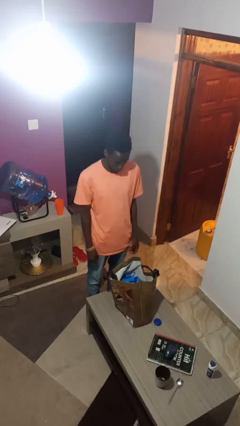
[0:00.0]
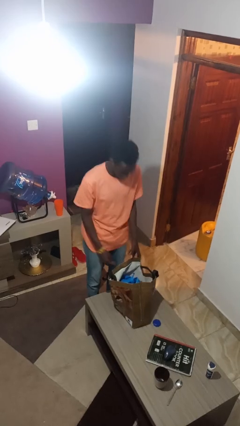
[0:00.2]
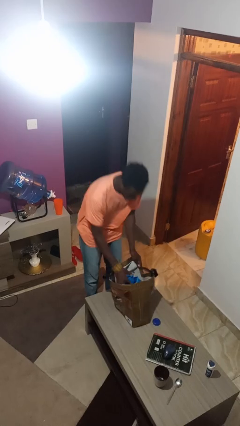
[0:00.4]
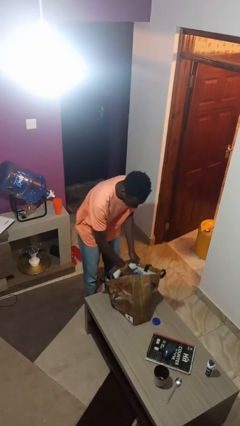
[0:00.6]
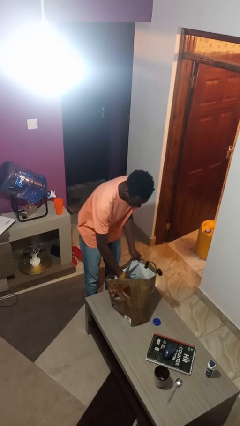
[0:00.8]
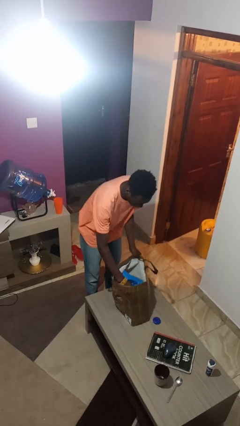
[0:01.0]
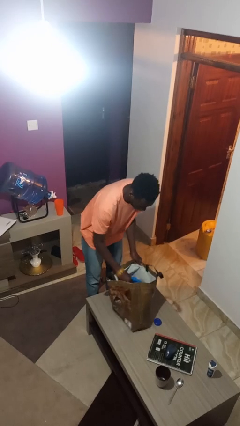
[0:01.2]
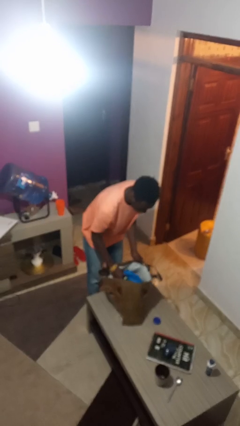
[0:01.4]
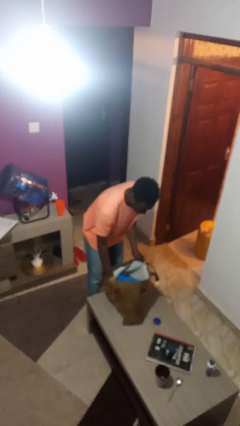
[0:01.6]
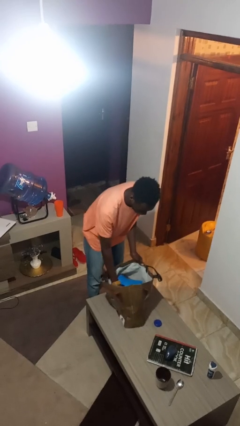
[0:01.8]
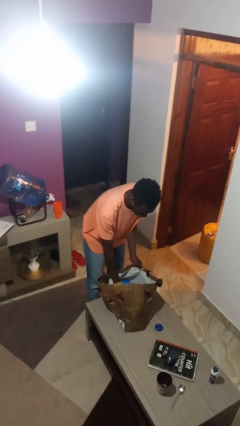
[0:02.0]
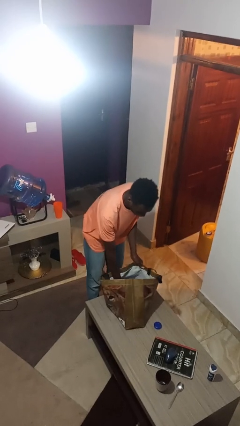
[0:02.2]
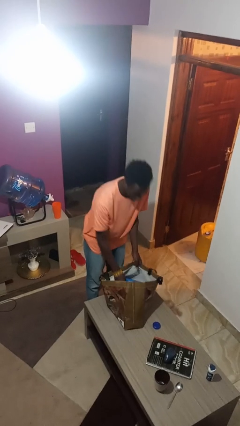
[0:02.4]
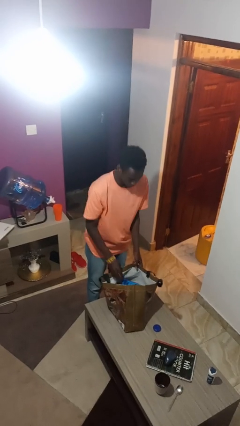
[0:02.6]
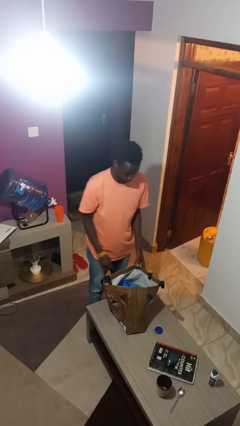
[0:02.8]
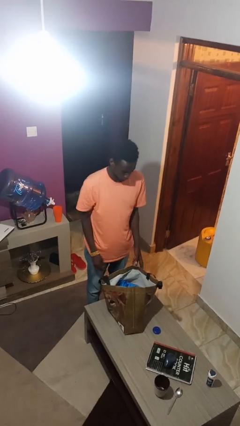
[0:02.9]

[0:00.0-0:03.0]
person searches in bag

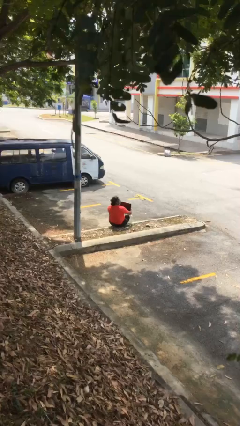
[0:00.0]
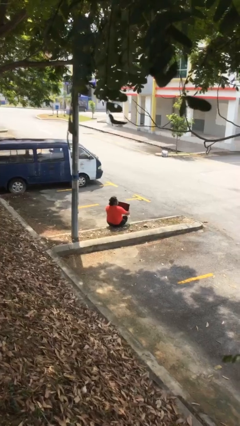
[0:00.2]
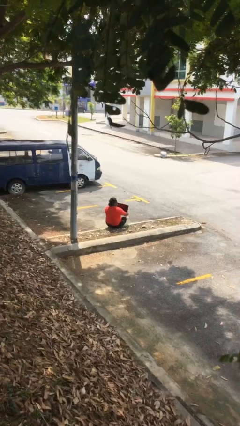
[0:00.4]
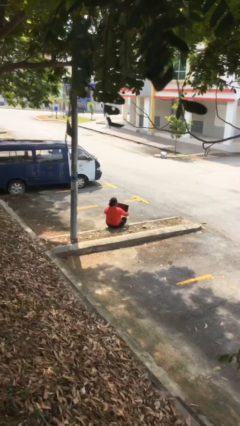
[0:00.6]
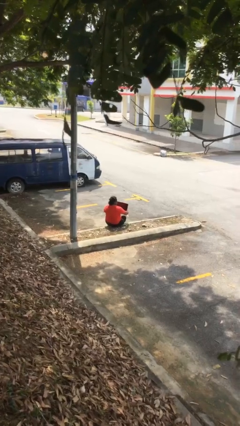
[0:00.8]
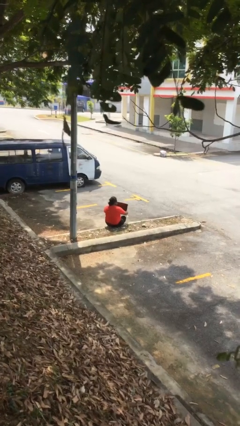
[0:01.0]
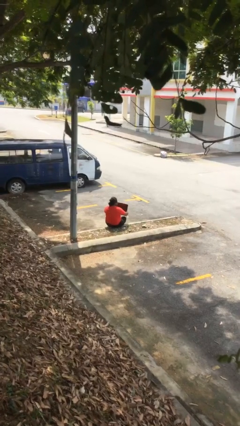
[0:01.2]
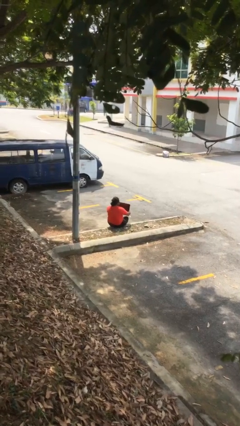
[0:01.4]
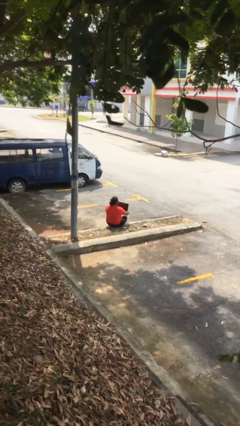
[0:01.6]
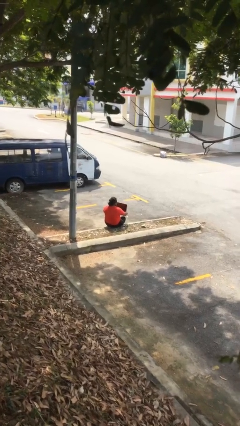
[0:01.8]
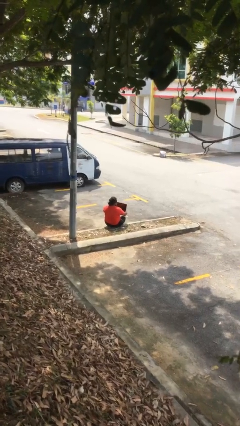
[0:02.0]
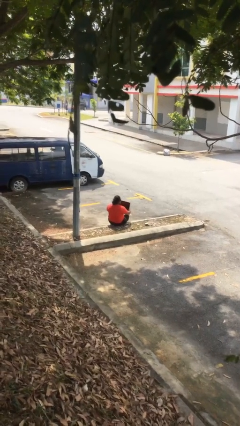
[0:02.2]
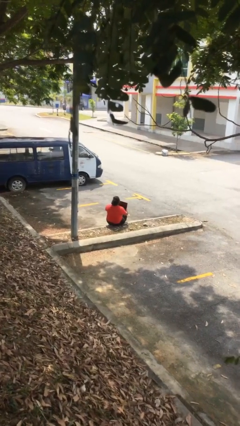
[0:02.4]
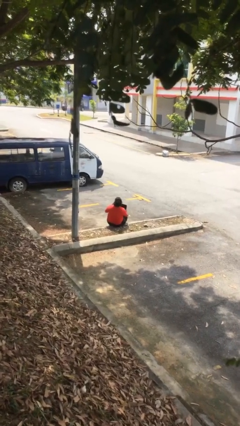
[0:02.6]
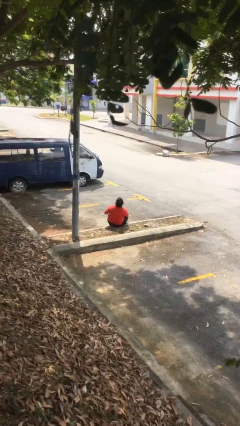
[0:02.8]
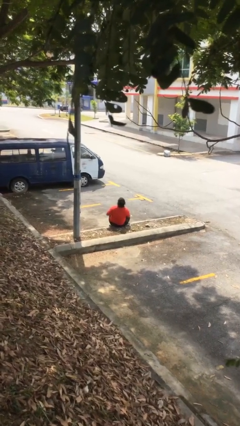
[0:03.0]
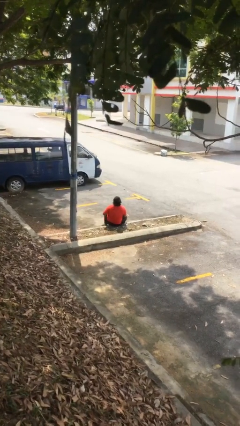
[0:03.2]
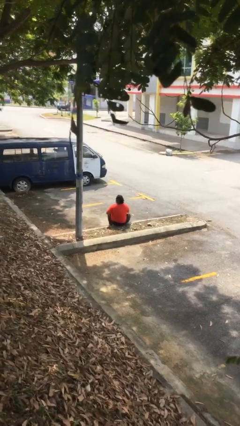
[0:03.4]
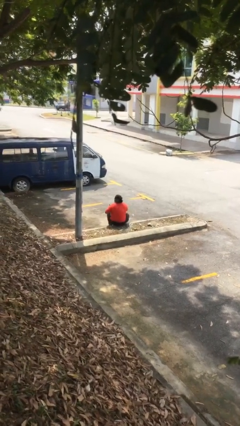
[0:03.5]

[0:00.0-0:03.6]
person interacts with laptop

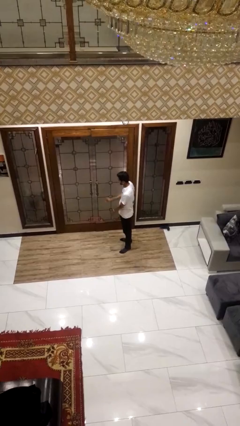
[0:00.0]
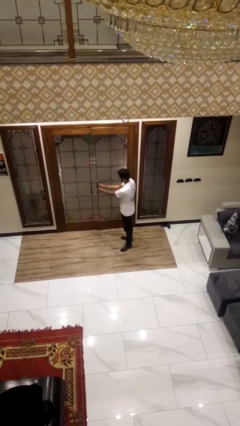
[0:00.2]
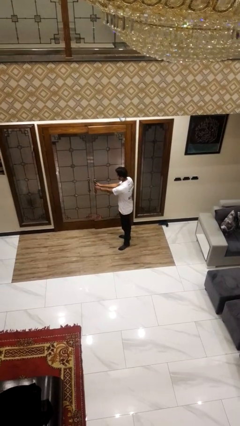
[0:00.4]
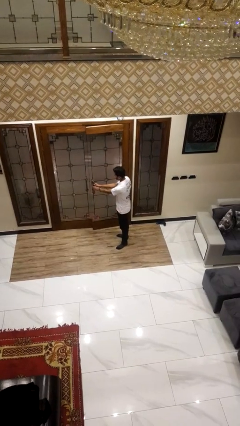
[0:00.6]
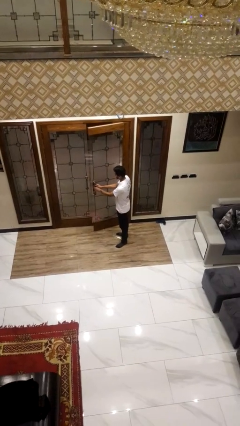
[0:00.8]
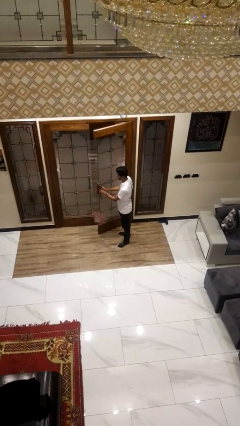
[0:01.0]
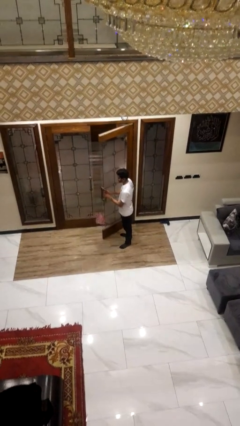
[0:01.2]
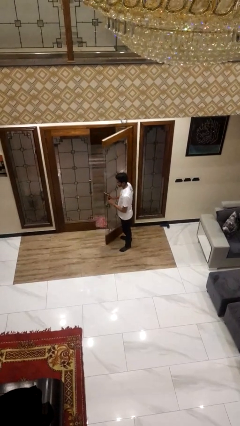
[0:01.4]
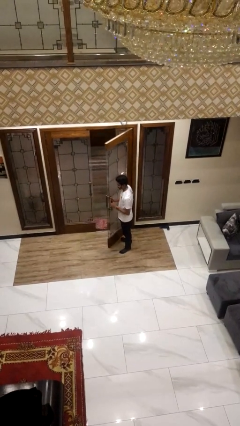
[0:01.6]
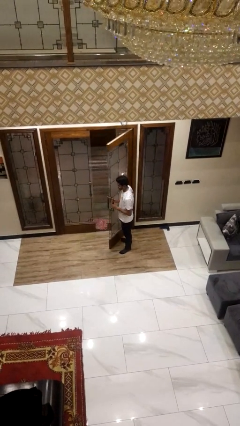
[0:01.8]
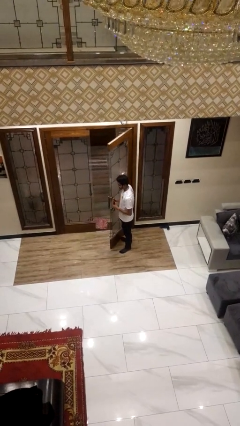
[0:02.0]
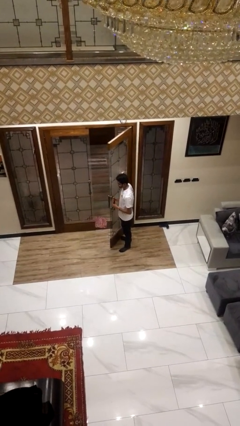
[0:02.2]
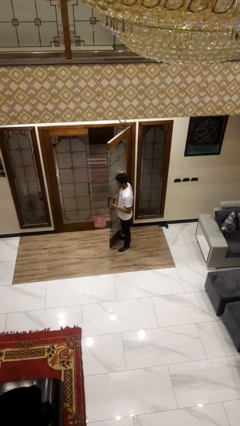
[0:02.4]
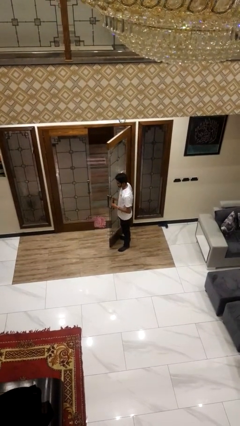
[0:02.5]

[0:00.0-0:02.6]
person opens facility door

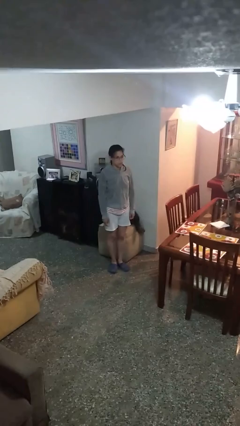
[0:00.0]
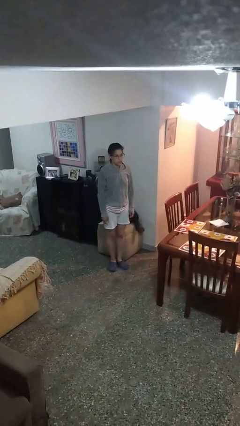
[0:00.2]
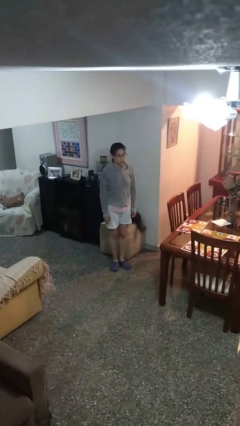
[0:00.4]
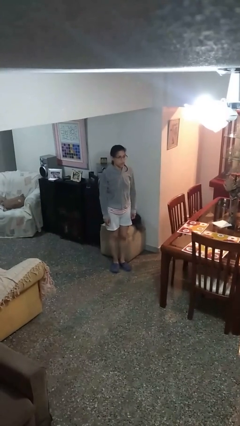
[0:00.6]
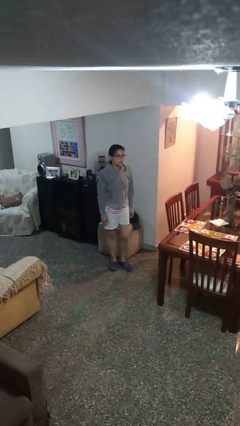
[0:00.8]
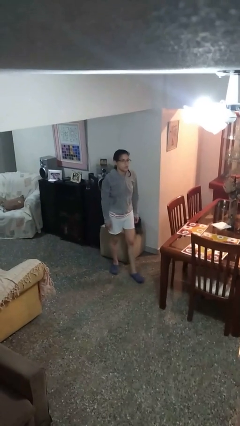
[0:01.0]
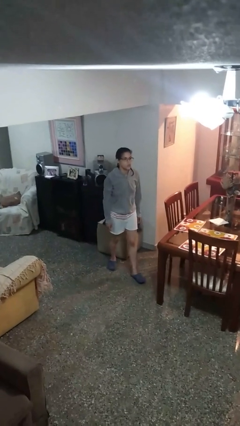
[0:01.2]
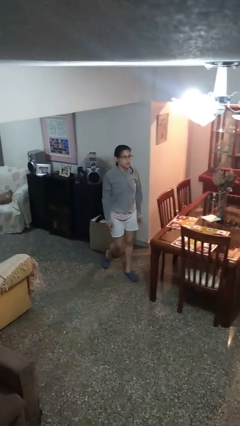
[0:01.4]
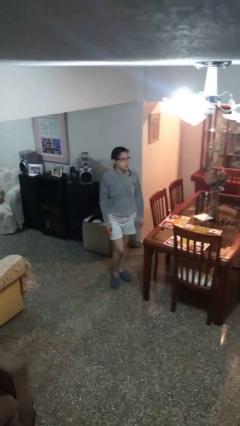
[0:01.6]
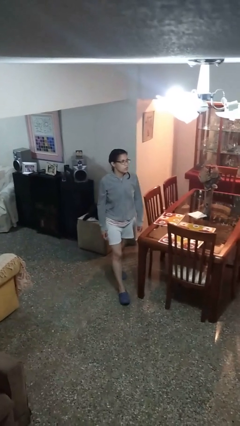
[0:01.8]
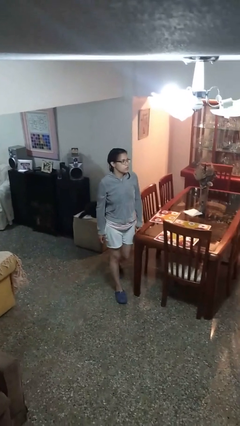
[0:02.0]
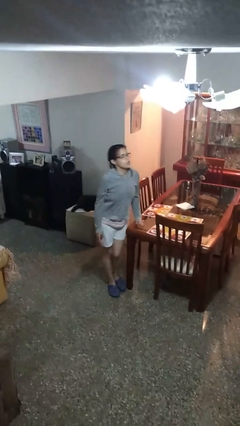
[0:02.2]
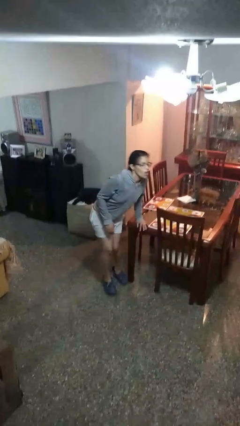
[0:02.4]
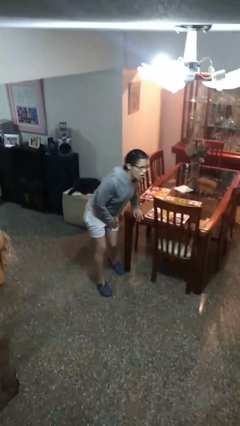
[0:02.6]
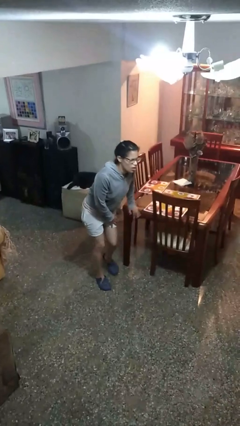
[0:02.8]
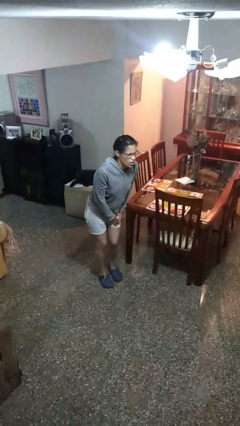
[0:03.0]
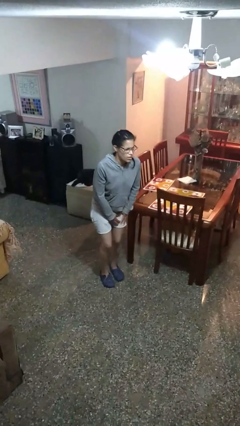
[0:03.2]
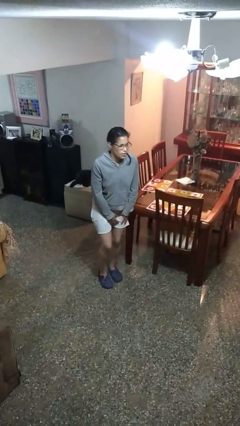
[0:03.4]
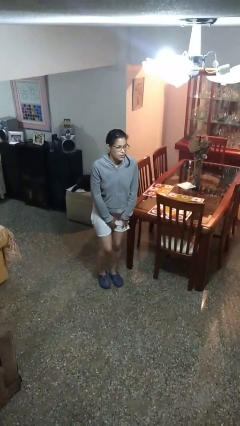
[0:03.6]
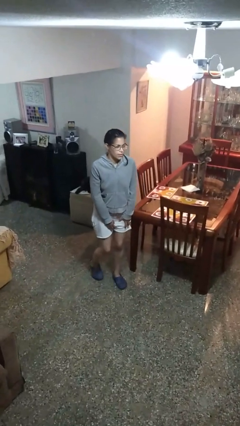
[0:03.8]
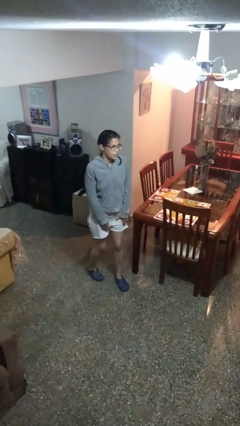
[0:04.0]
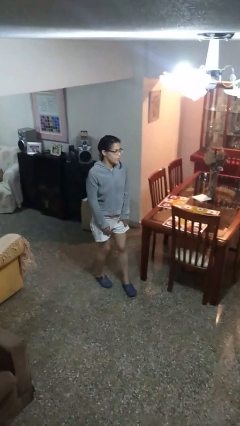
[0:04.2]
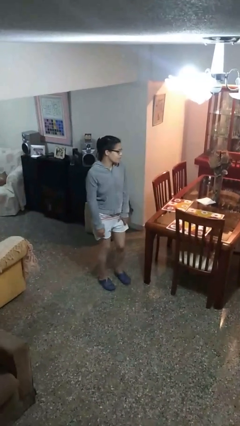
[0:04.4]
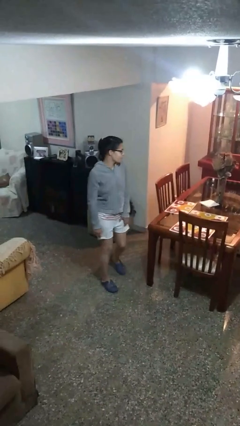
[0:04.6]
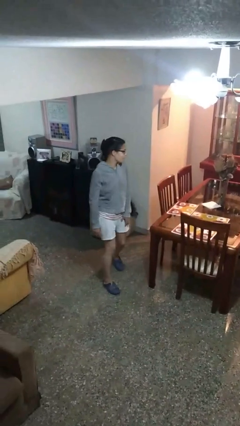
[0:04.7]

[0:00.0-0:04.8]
person bumps into table

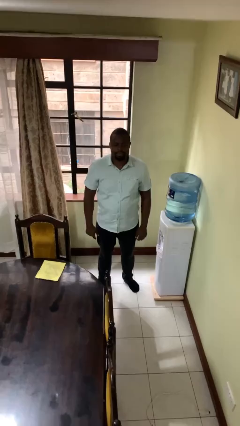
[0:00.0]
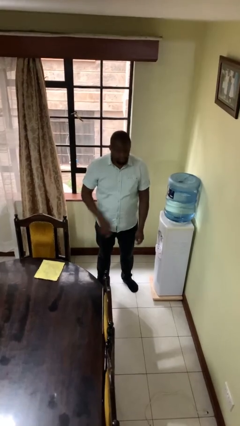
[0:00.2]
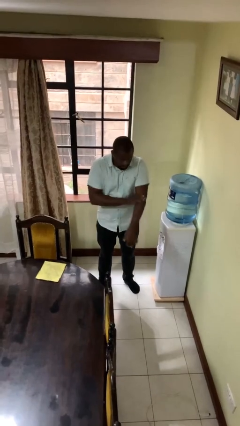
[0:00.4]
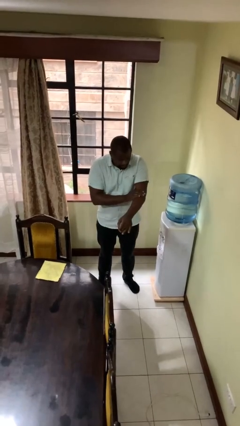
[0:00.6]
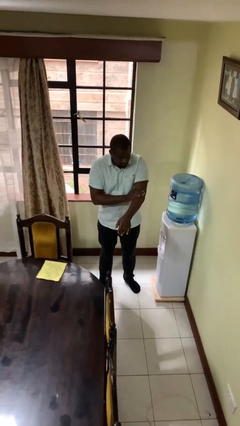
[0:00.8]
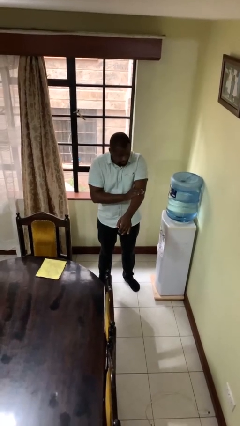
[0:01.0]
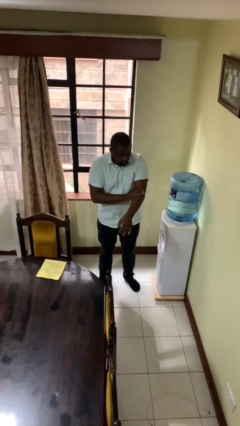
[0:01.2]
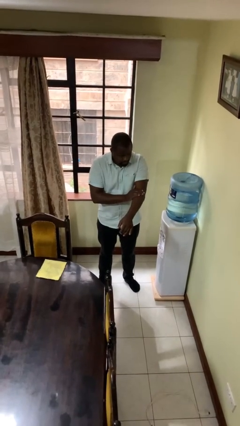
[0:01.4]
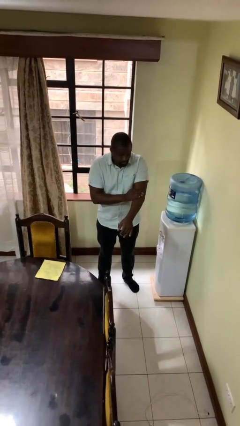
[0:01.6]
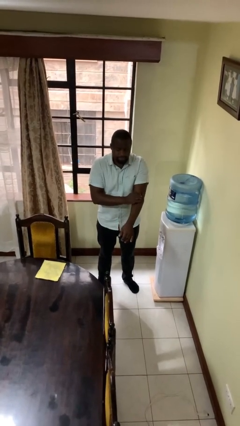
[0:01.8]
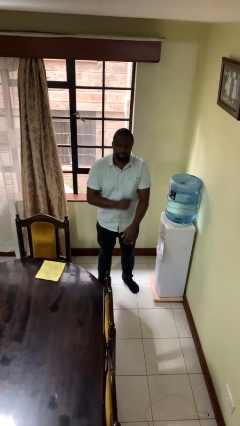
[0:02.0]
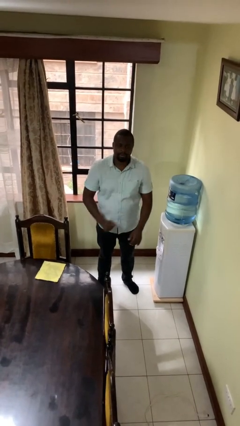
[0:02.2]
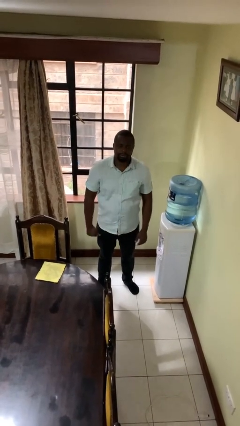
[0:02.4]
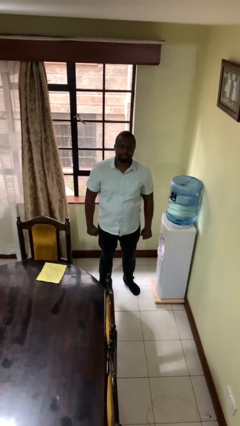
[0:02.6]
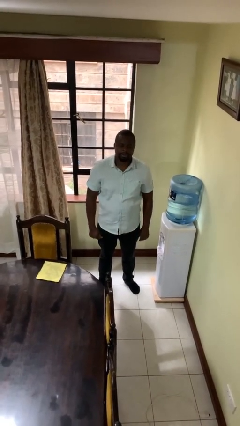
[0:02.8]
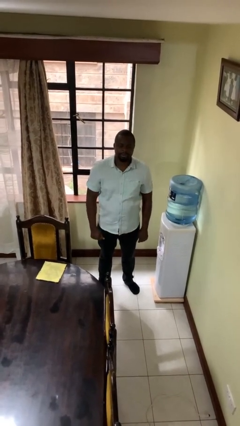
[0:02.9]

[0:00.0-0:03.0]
person swats bug

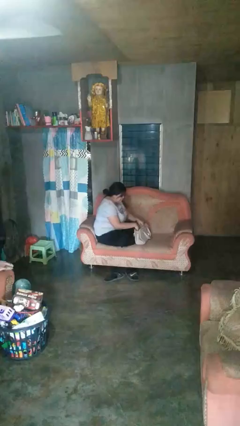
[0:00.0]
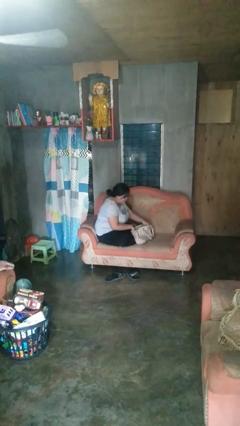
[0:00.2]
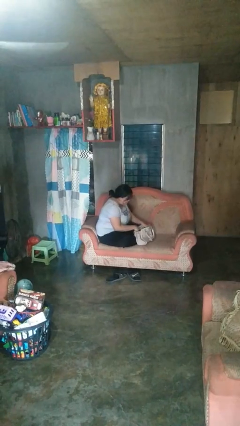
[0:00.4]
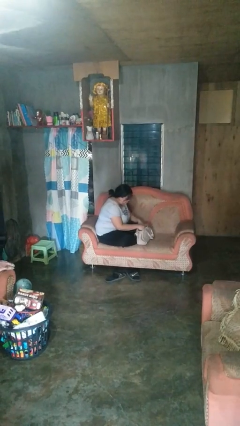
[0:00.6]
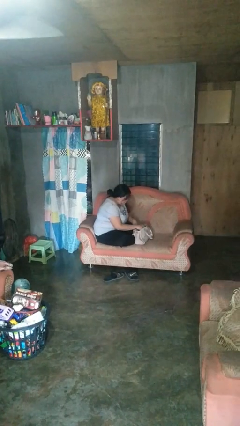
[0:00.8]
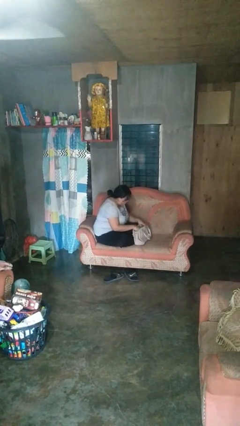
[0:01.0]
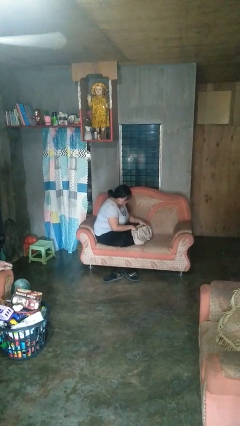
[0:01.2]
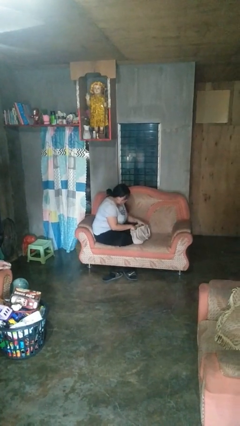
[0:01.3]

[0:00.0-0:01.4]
person searches in purse
